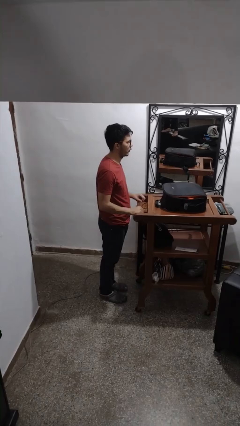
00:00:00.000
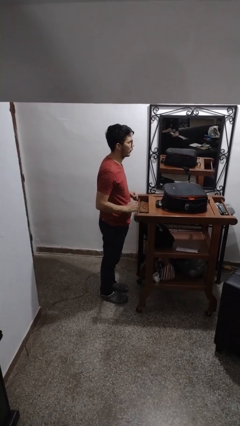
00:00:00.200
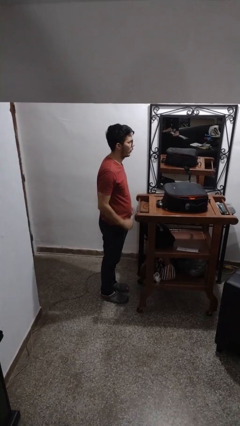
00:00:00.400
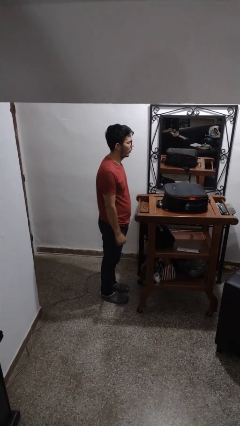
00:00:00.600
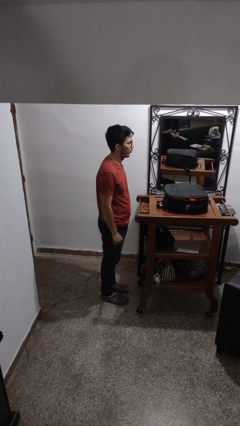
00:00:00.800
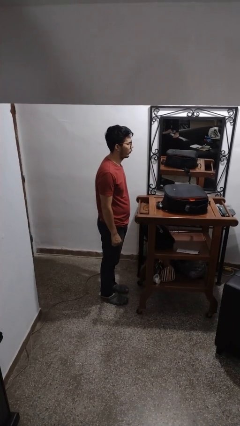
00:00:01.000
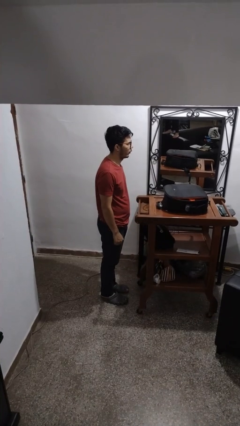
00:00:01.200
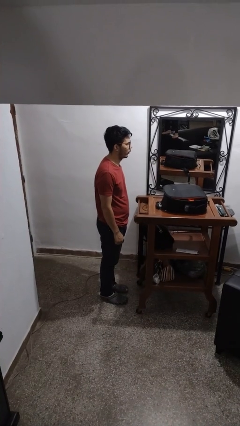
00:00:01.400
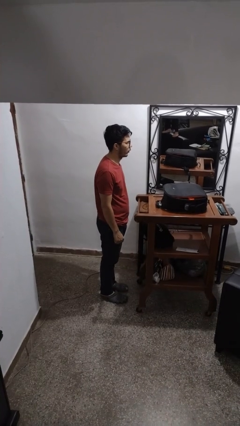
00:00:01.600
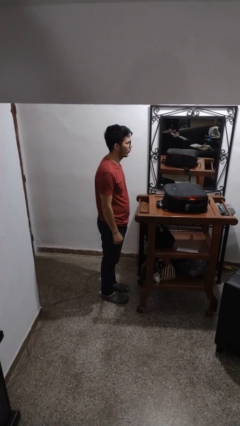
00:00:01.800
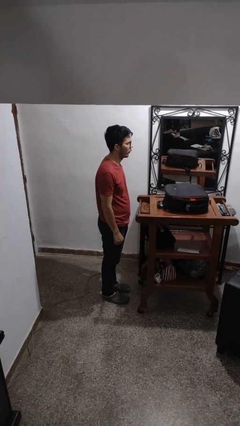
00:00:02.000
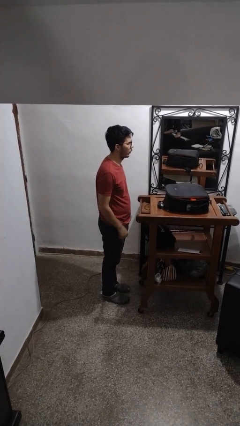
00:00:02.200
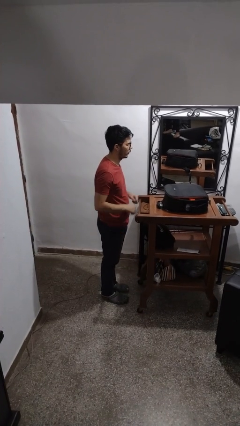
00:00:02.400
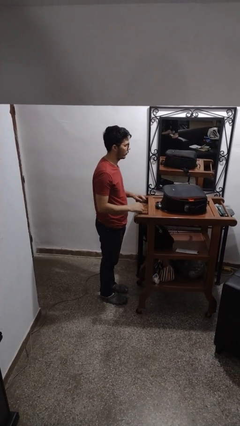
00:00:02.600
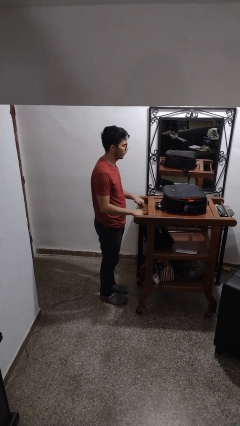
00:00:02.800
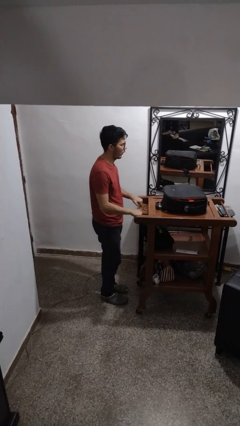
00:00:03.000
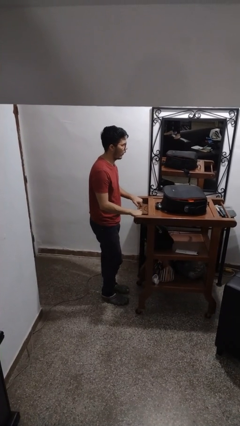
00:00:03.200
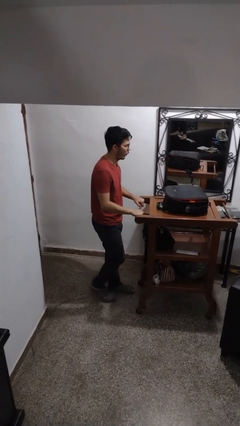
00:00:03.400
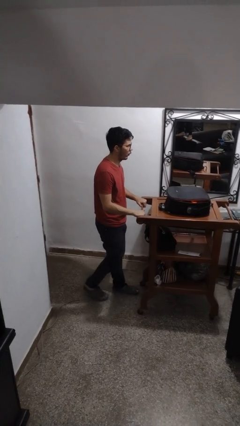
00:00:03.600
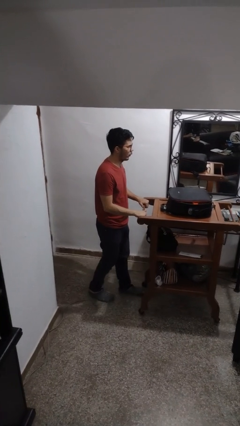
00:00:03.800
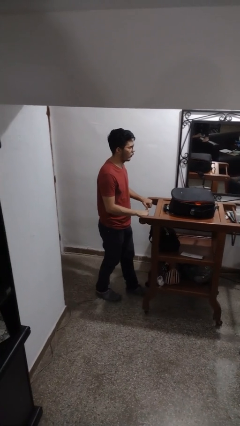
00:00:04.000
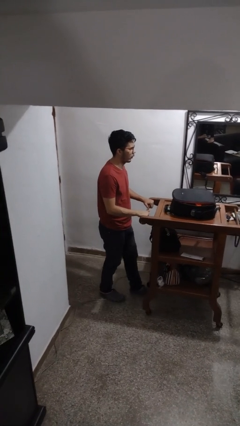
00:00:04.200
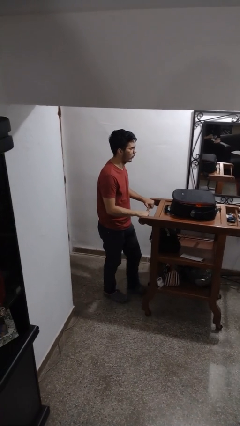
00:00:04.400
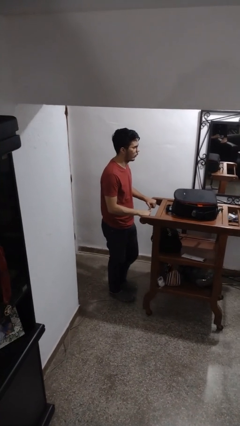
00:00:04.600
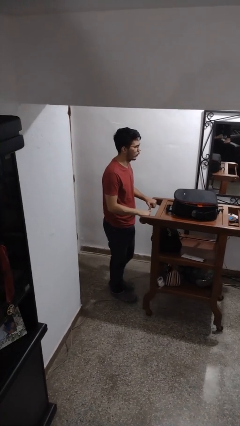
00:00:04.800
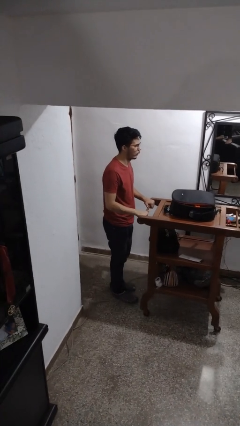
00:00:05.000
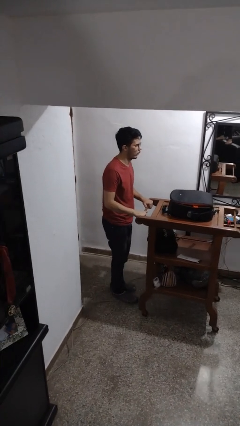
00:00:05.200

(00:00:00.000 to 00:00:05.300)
person pulls wheeled cart

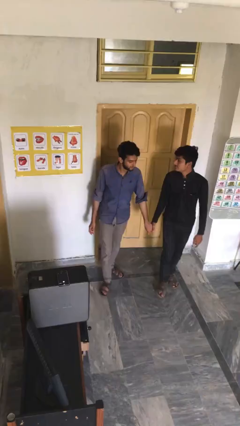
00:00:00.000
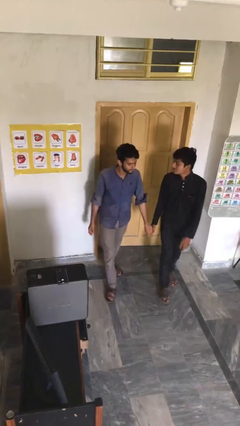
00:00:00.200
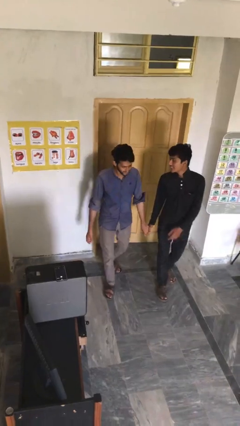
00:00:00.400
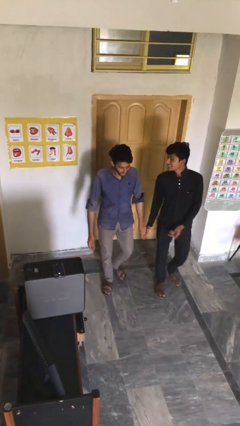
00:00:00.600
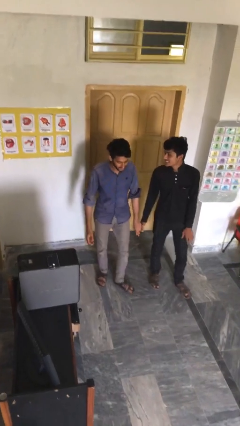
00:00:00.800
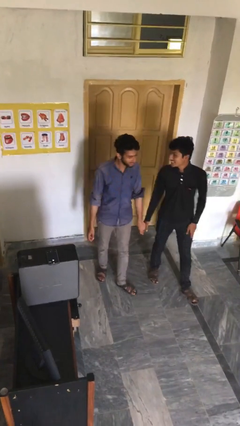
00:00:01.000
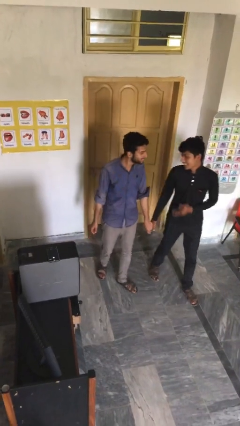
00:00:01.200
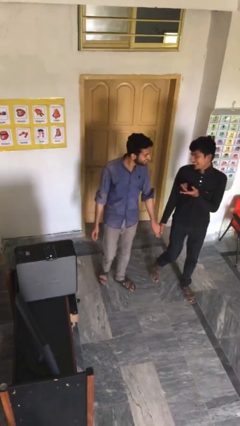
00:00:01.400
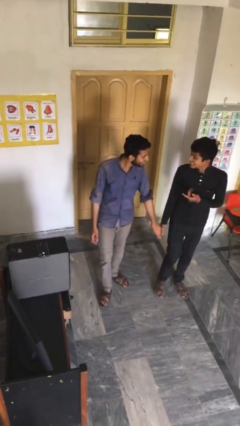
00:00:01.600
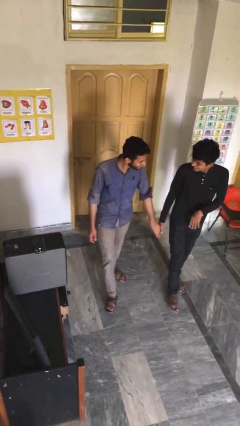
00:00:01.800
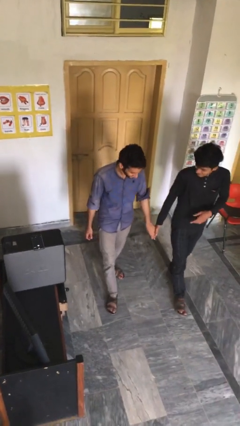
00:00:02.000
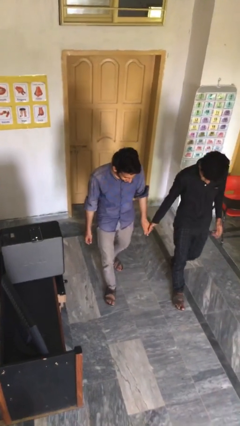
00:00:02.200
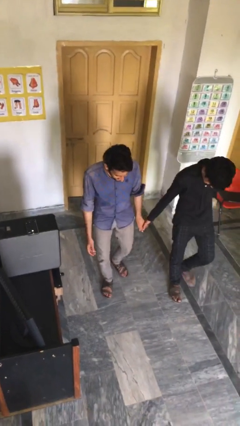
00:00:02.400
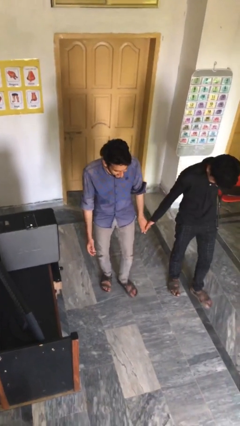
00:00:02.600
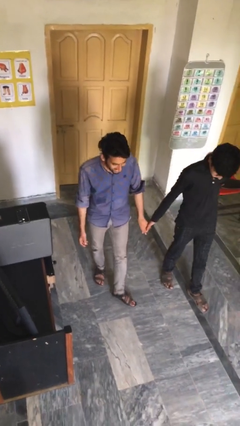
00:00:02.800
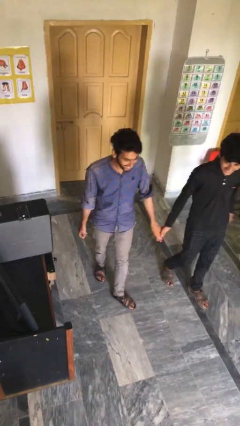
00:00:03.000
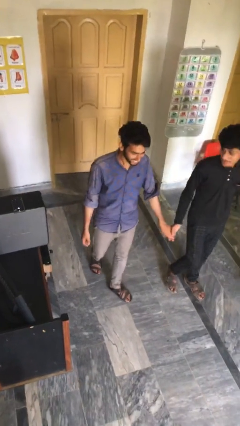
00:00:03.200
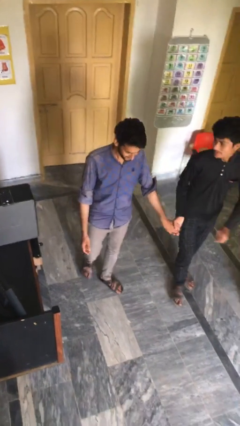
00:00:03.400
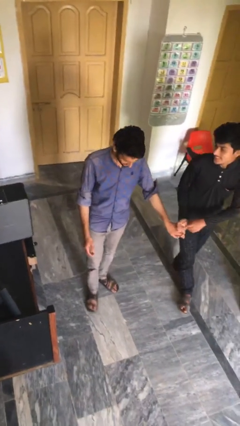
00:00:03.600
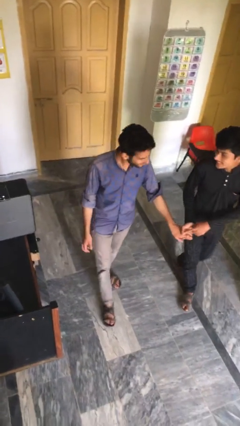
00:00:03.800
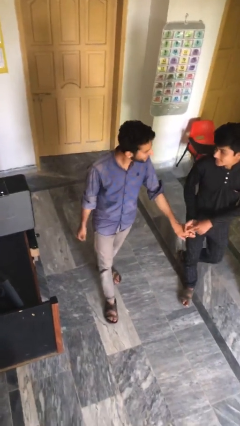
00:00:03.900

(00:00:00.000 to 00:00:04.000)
person holds hand

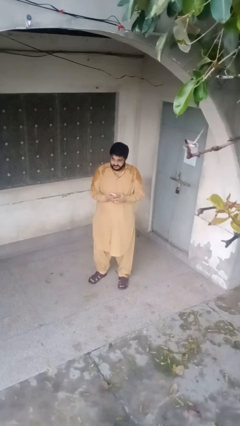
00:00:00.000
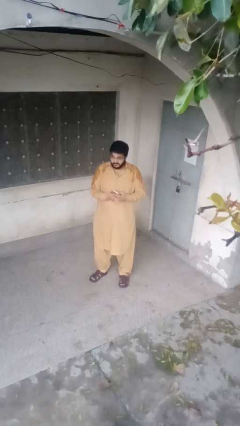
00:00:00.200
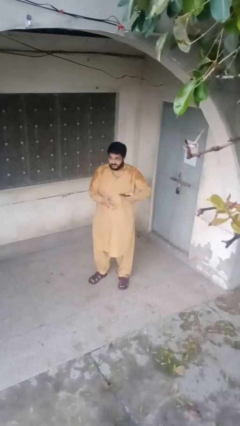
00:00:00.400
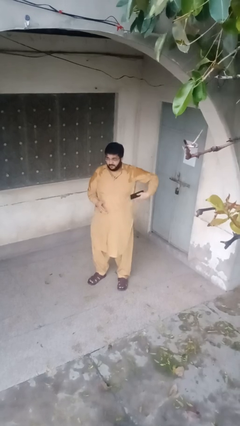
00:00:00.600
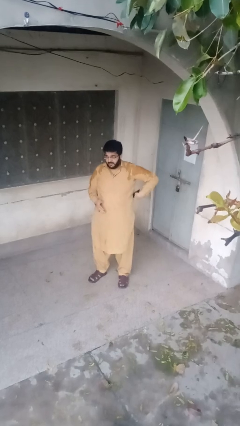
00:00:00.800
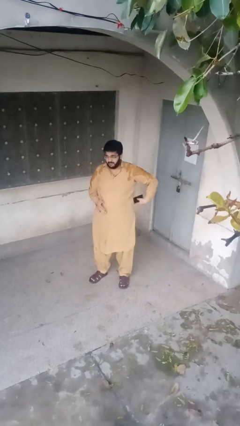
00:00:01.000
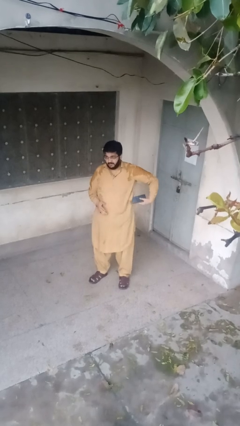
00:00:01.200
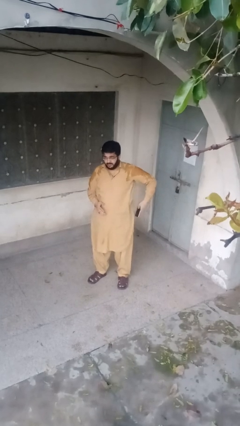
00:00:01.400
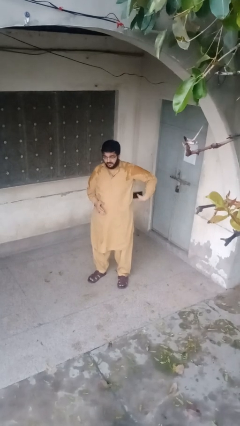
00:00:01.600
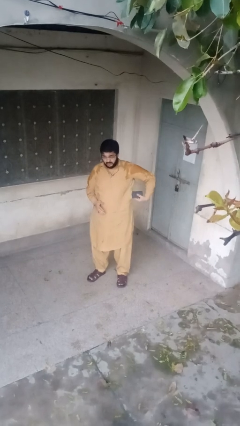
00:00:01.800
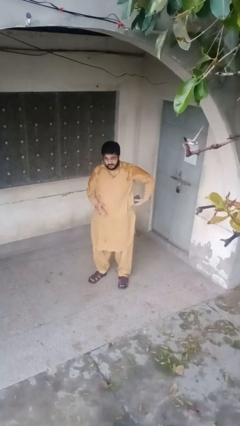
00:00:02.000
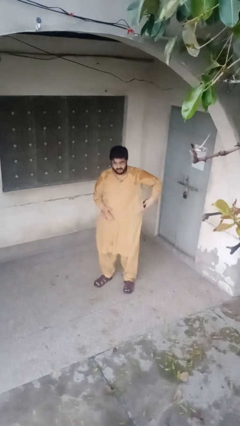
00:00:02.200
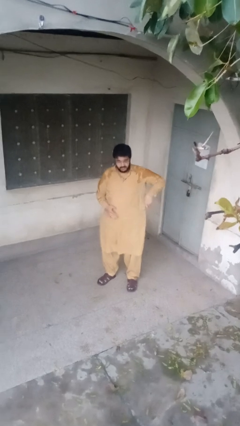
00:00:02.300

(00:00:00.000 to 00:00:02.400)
person puts phone into pocket

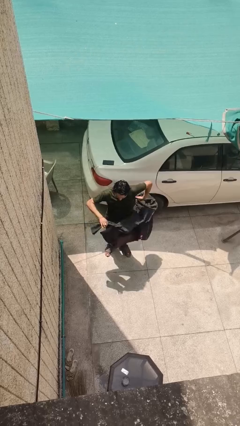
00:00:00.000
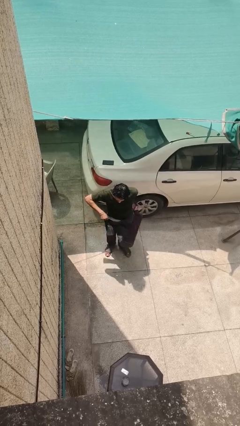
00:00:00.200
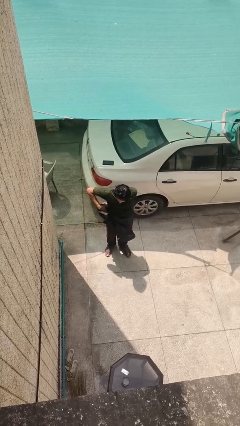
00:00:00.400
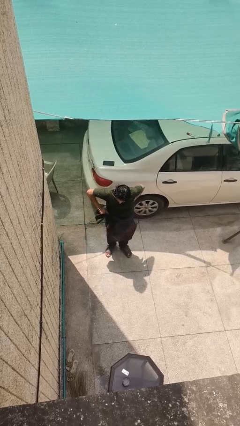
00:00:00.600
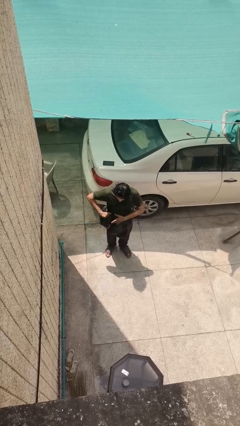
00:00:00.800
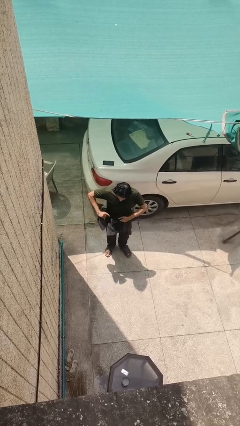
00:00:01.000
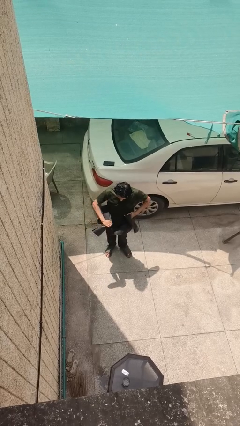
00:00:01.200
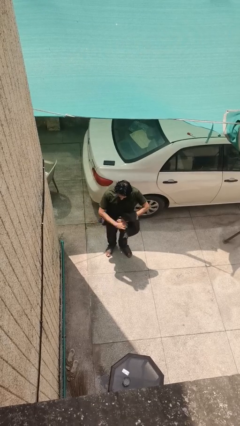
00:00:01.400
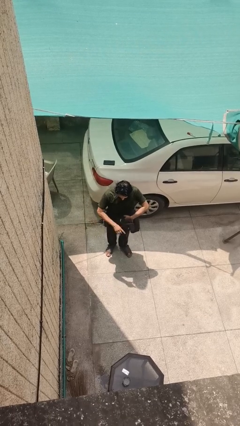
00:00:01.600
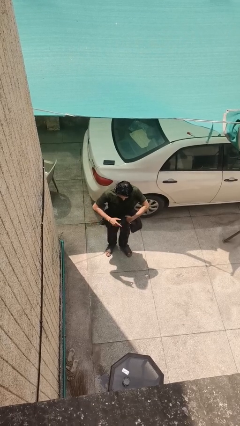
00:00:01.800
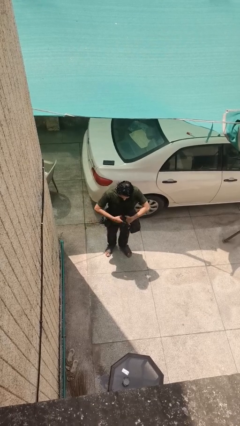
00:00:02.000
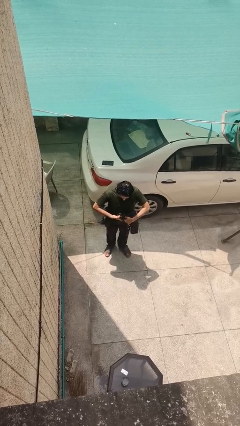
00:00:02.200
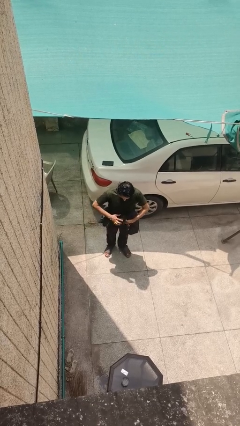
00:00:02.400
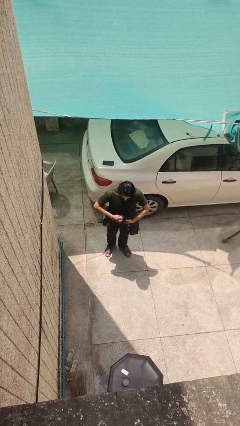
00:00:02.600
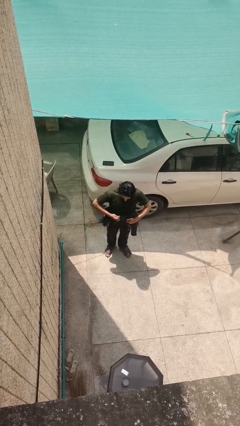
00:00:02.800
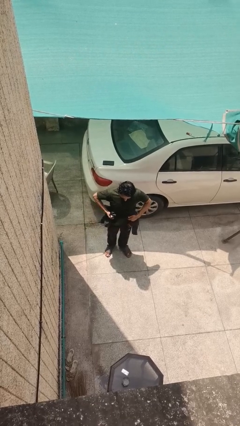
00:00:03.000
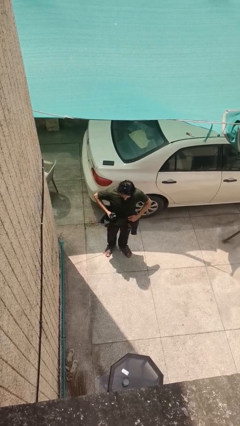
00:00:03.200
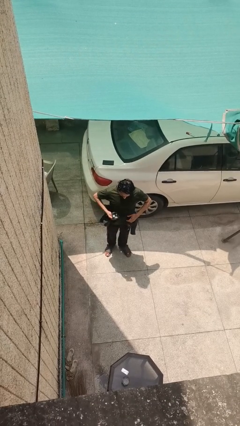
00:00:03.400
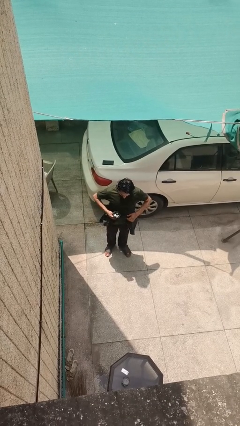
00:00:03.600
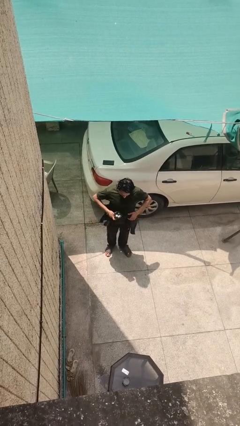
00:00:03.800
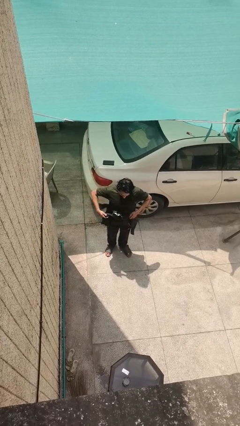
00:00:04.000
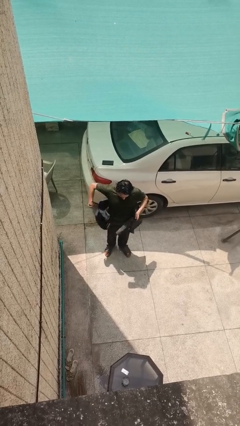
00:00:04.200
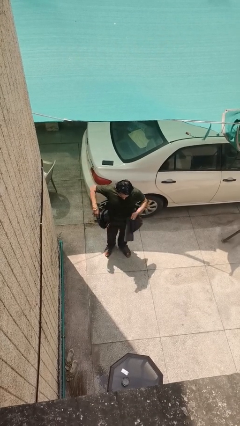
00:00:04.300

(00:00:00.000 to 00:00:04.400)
person ties jacket around waist

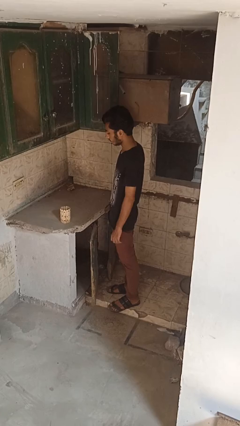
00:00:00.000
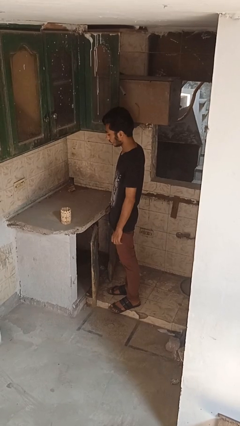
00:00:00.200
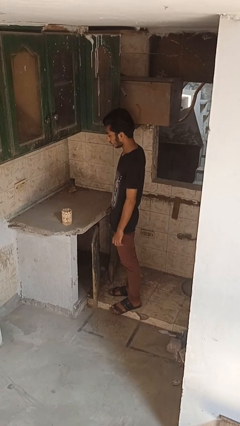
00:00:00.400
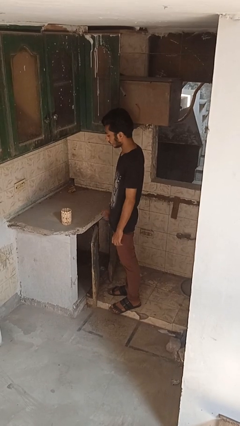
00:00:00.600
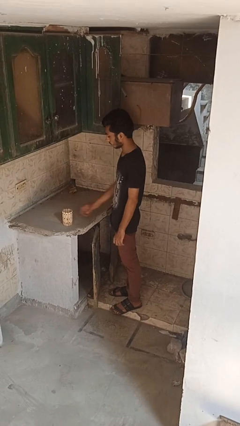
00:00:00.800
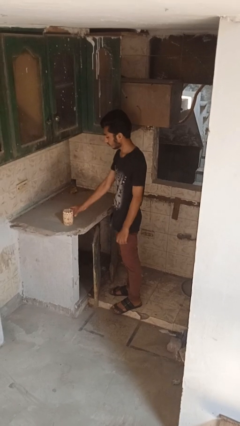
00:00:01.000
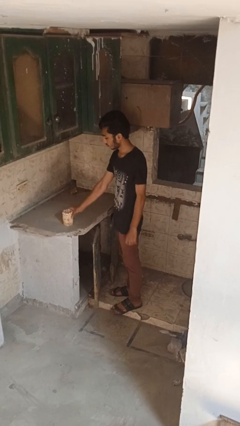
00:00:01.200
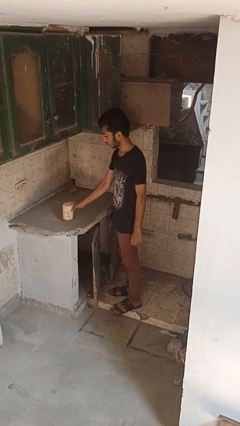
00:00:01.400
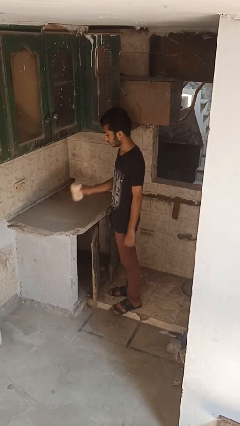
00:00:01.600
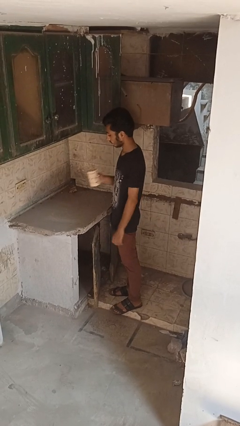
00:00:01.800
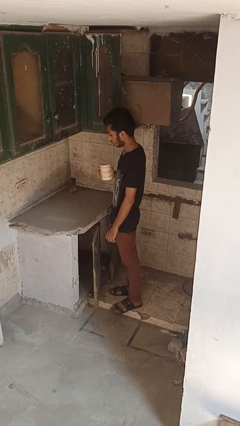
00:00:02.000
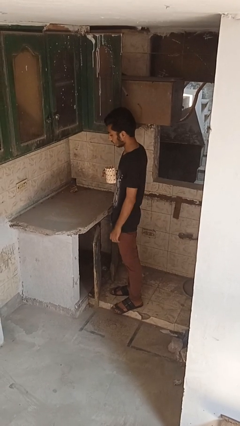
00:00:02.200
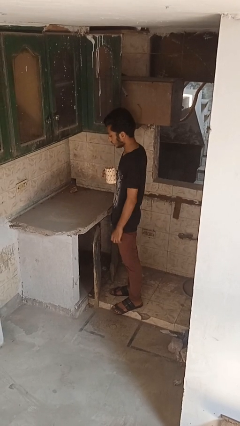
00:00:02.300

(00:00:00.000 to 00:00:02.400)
person picks up object from countertop
